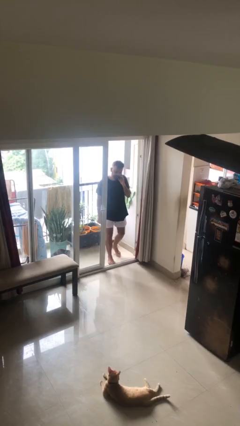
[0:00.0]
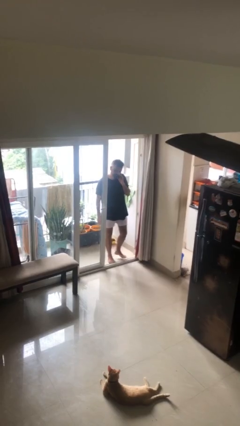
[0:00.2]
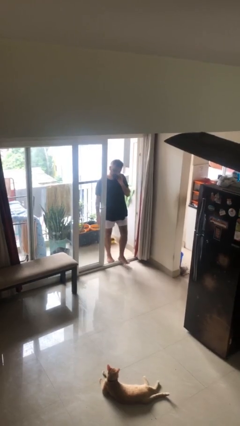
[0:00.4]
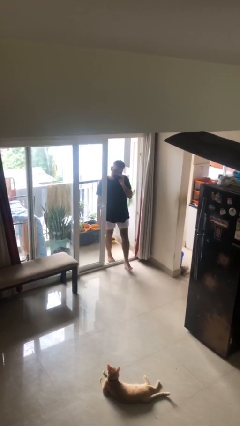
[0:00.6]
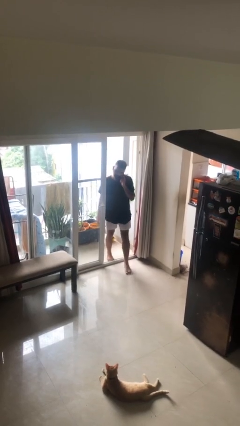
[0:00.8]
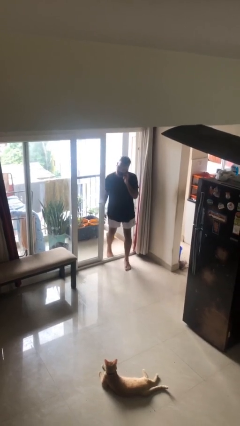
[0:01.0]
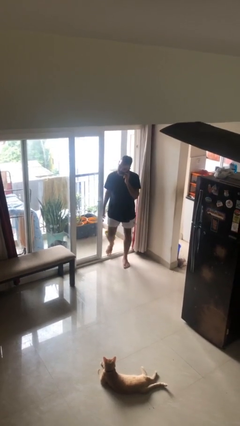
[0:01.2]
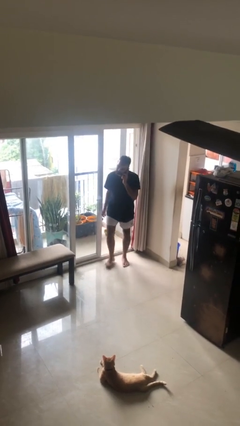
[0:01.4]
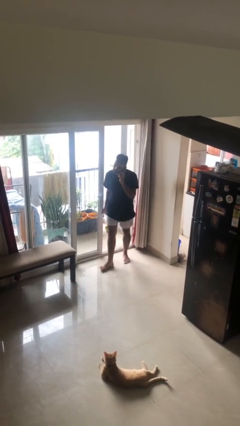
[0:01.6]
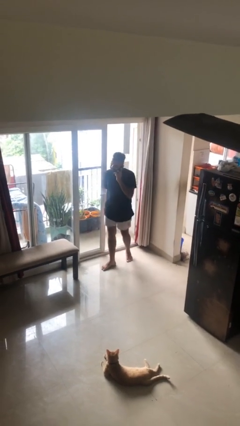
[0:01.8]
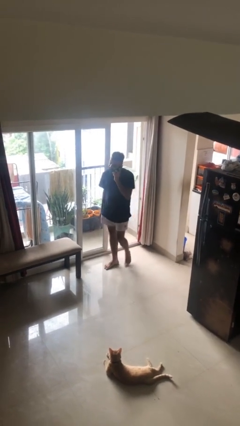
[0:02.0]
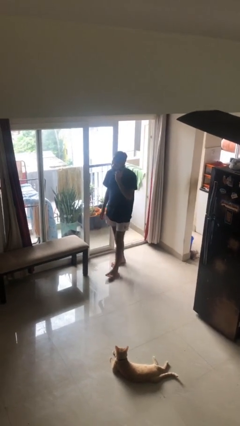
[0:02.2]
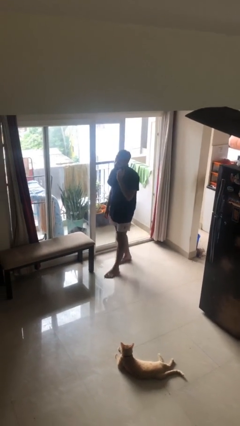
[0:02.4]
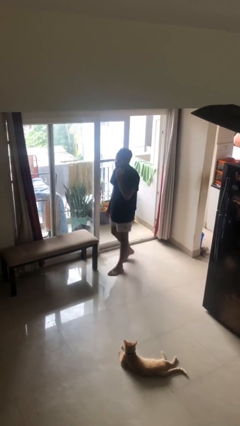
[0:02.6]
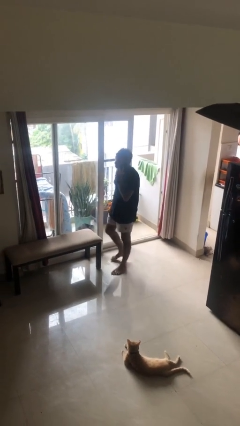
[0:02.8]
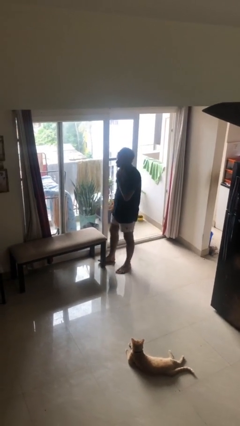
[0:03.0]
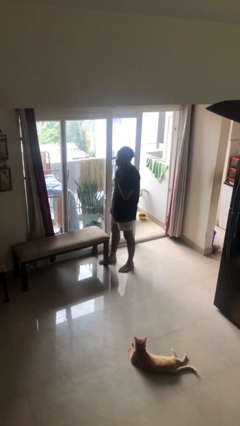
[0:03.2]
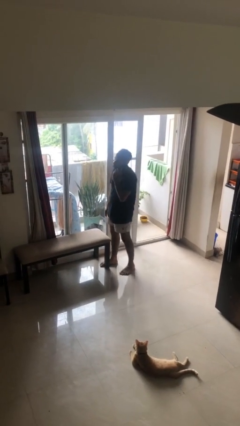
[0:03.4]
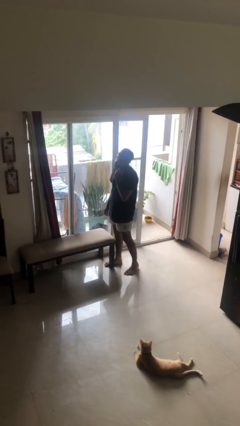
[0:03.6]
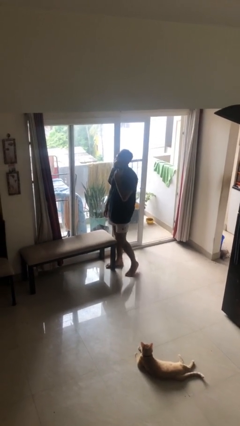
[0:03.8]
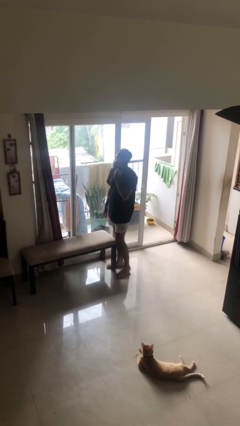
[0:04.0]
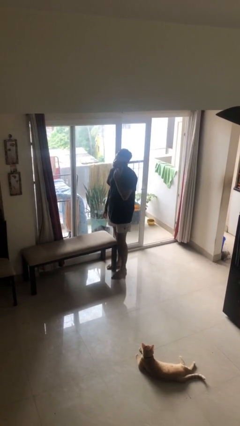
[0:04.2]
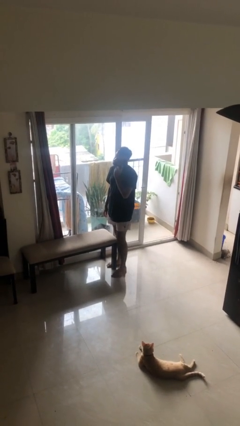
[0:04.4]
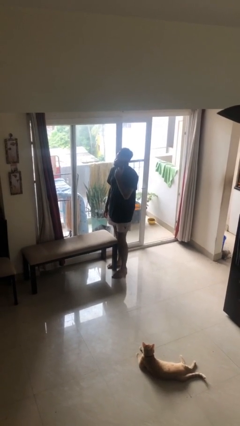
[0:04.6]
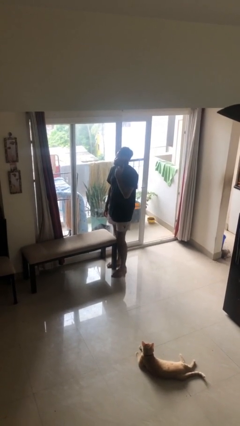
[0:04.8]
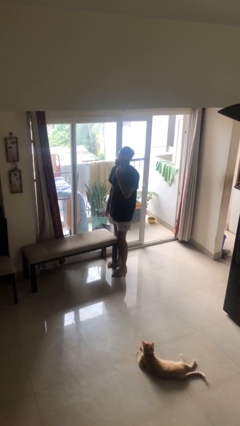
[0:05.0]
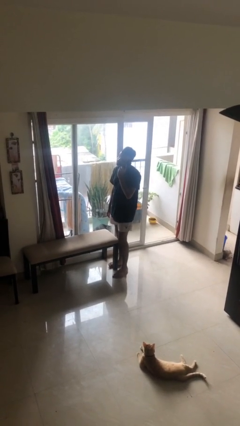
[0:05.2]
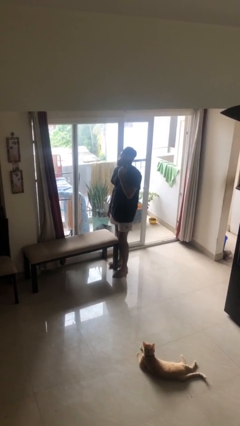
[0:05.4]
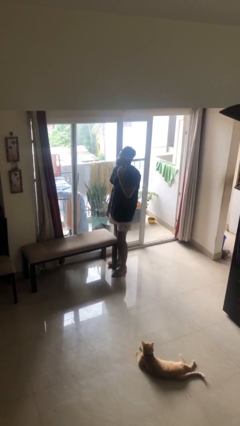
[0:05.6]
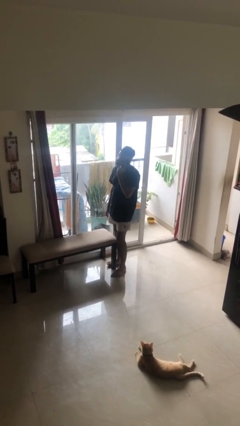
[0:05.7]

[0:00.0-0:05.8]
person enters scene through structure

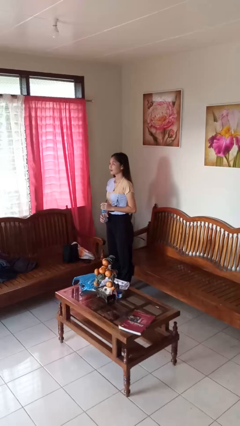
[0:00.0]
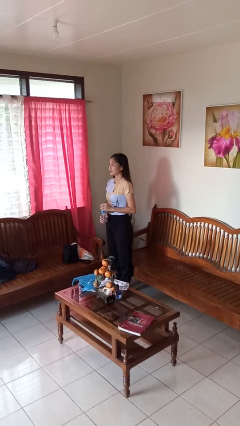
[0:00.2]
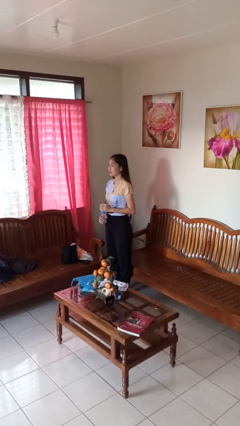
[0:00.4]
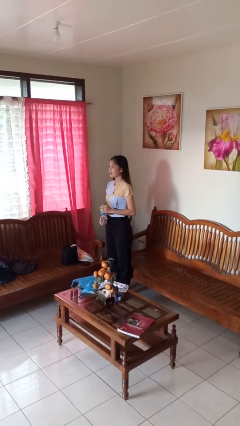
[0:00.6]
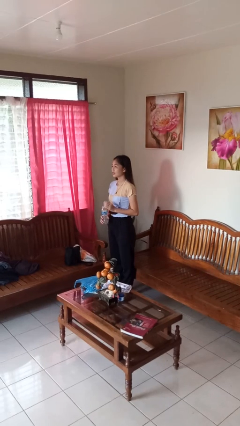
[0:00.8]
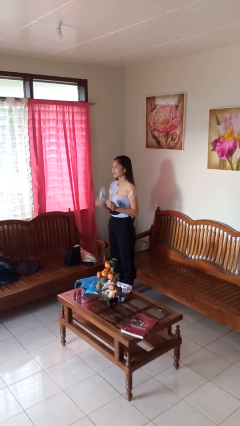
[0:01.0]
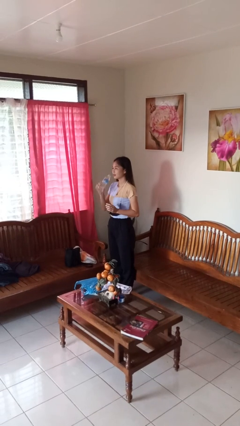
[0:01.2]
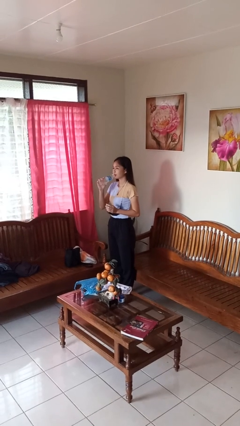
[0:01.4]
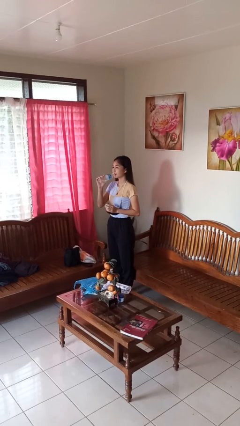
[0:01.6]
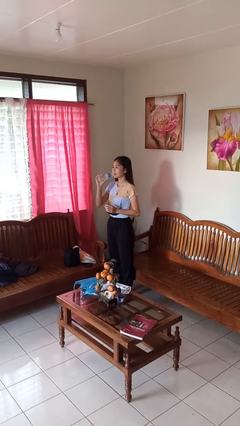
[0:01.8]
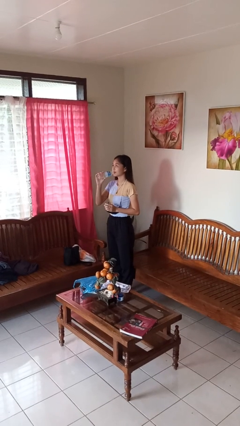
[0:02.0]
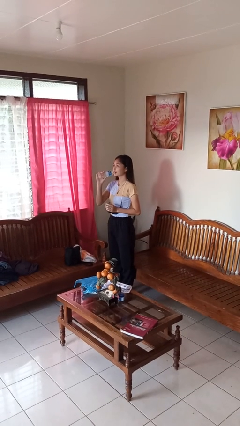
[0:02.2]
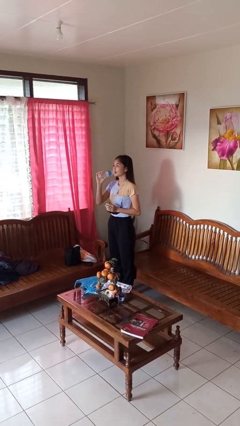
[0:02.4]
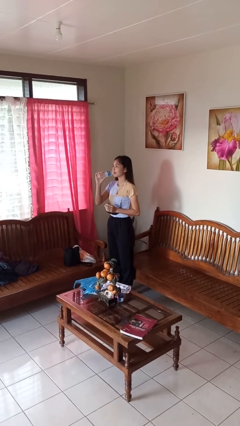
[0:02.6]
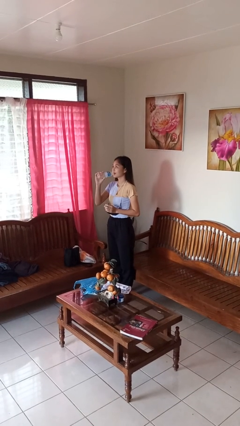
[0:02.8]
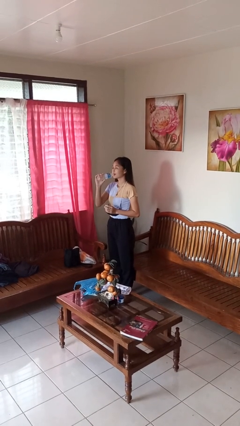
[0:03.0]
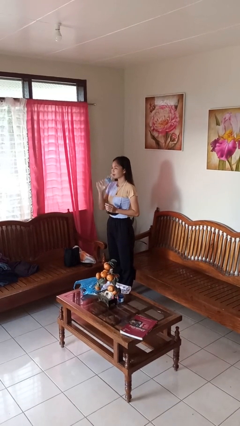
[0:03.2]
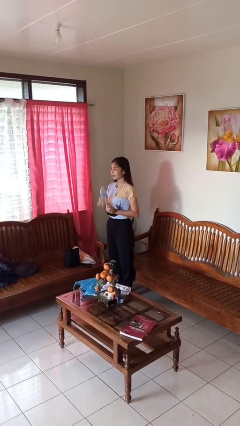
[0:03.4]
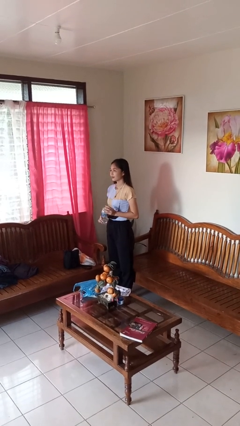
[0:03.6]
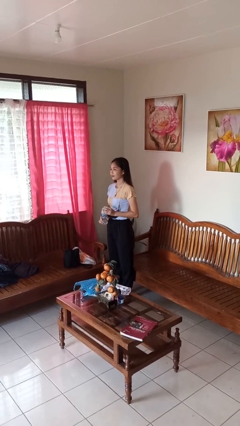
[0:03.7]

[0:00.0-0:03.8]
person drinks from bottle

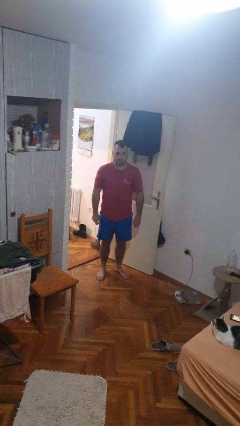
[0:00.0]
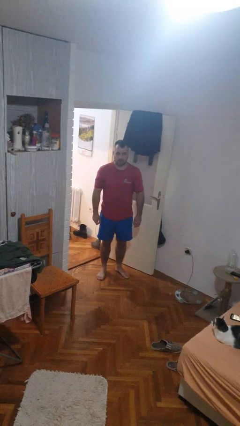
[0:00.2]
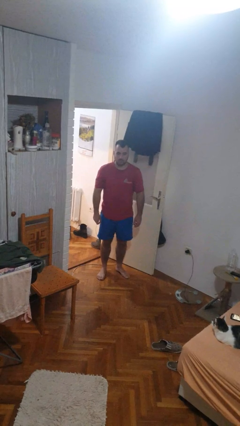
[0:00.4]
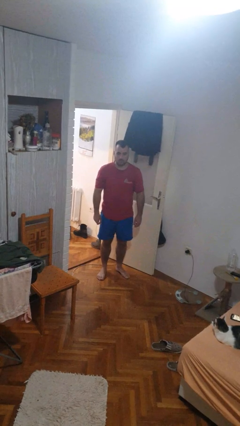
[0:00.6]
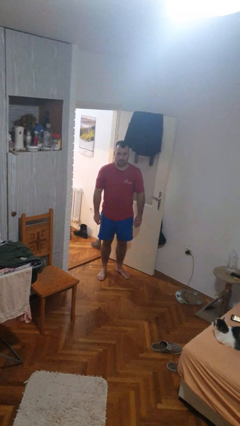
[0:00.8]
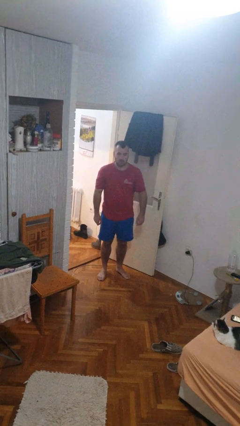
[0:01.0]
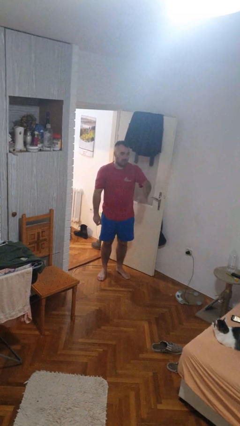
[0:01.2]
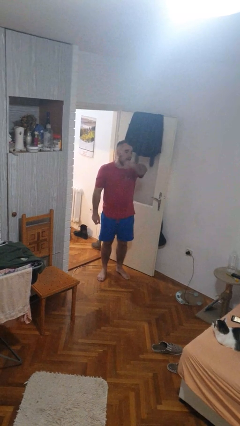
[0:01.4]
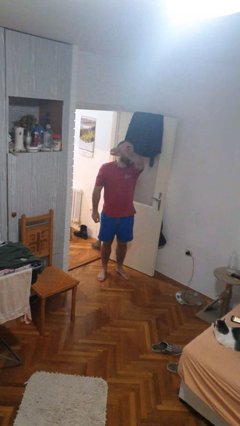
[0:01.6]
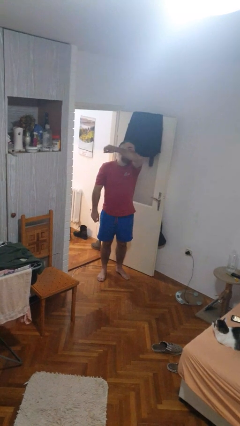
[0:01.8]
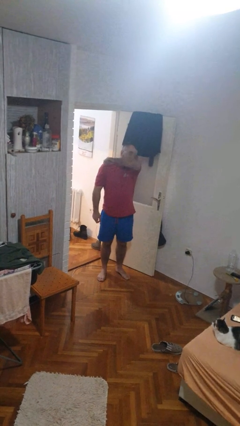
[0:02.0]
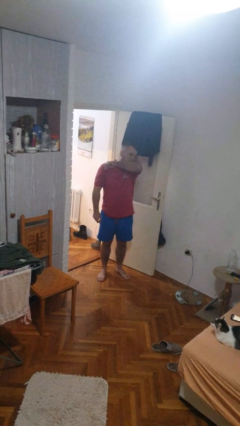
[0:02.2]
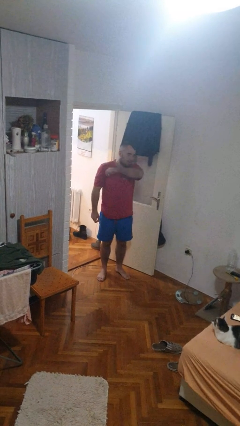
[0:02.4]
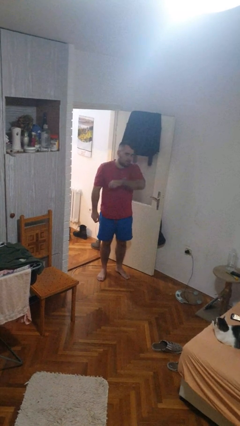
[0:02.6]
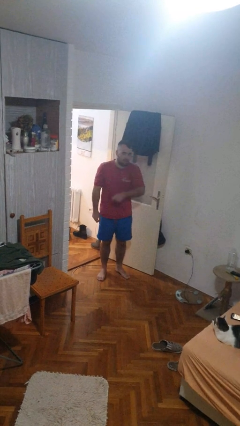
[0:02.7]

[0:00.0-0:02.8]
person sneezes into arm

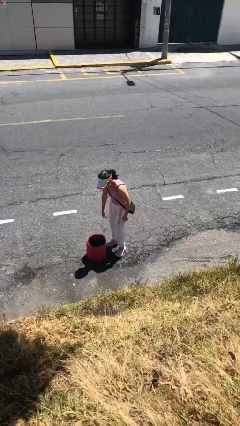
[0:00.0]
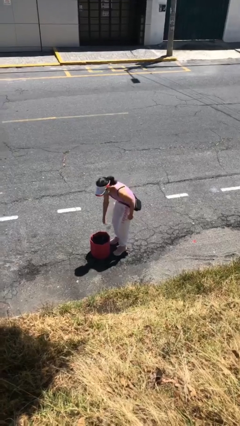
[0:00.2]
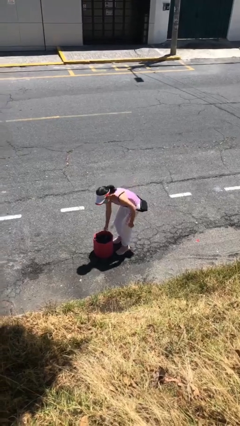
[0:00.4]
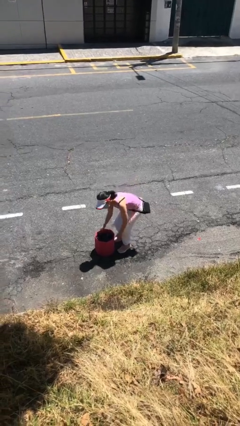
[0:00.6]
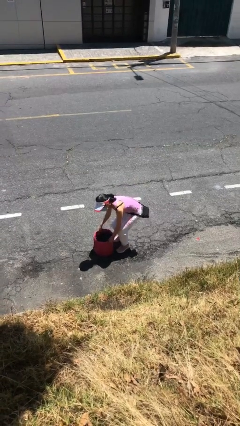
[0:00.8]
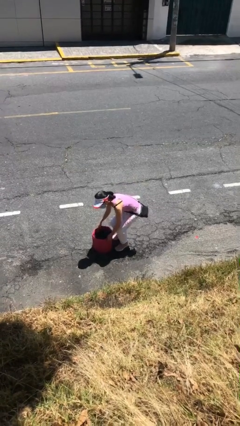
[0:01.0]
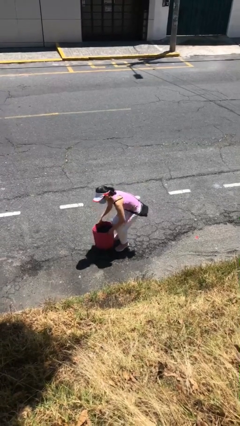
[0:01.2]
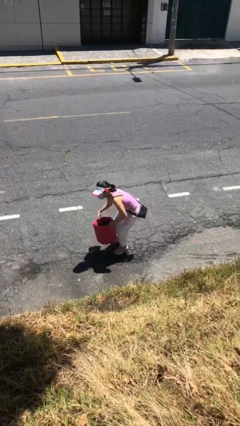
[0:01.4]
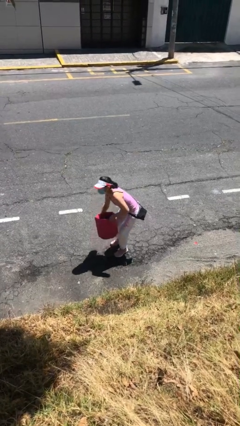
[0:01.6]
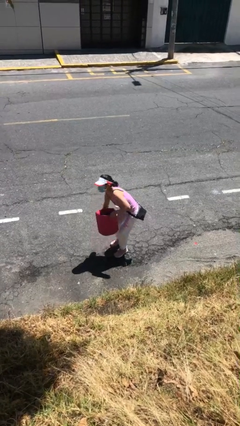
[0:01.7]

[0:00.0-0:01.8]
person picks up object from floor

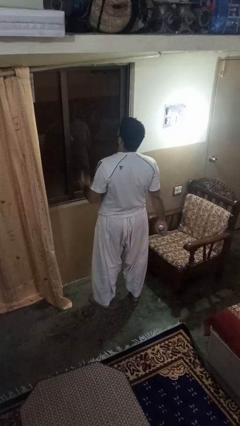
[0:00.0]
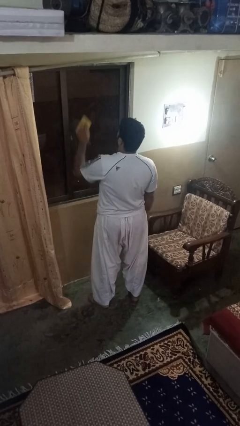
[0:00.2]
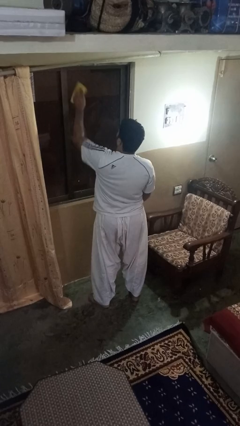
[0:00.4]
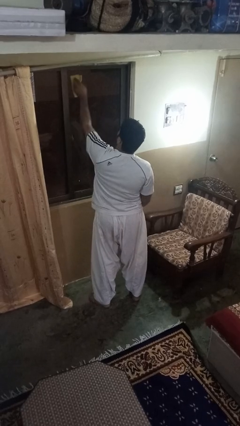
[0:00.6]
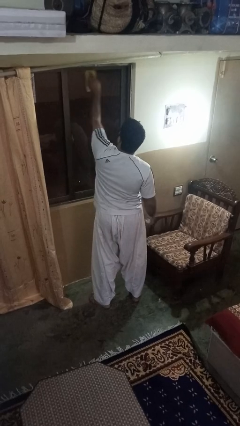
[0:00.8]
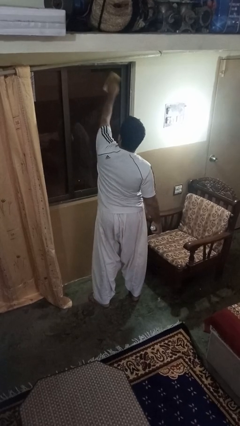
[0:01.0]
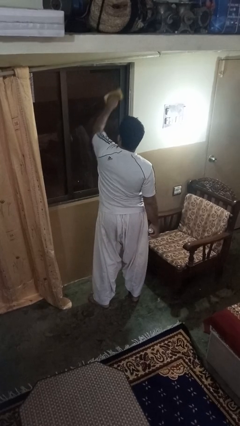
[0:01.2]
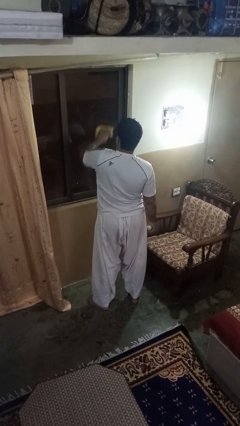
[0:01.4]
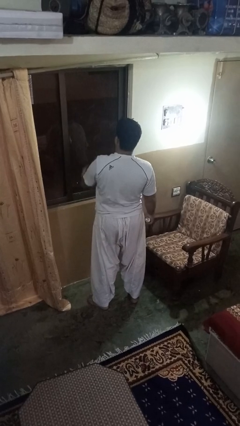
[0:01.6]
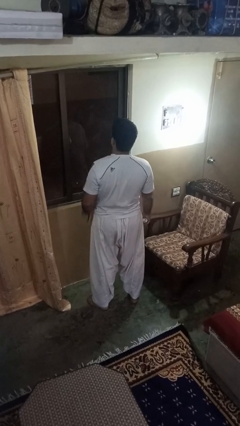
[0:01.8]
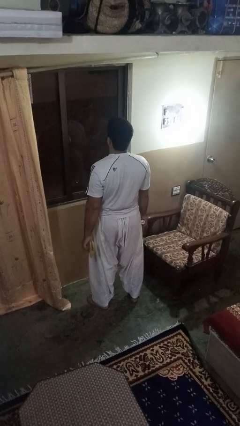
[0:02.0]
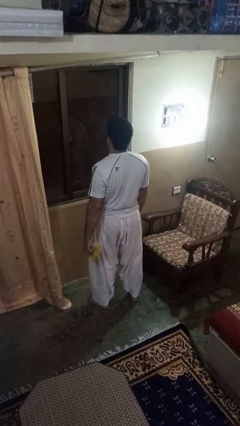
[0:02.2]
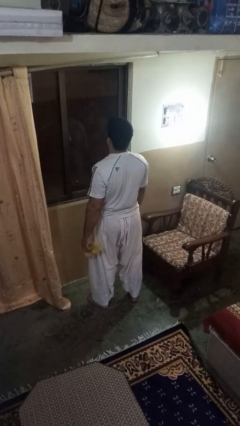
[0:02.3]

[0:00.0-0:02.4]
person washes window

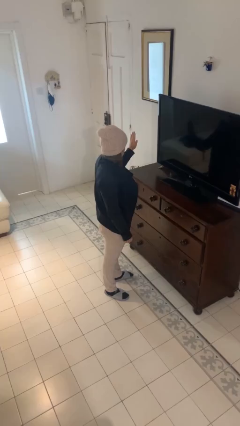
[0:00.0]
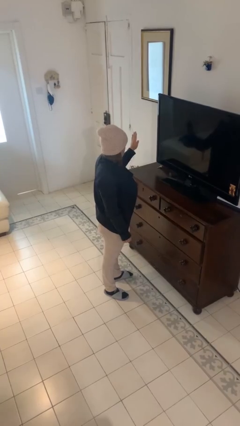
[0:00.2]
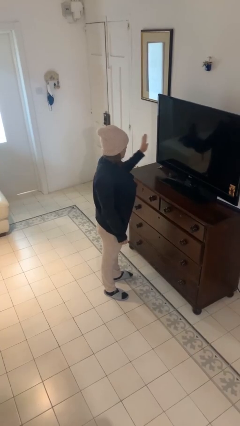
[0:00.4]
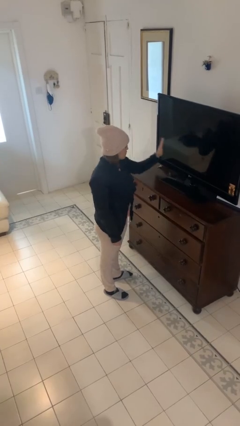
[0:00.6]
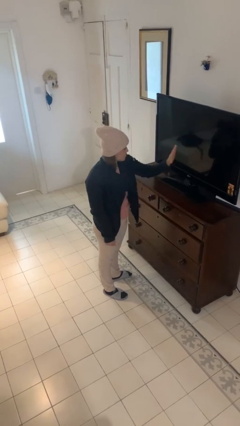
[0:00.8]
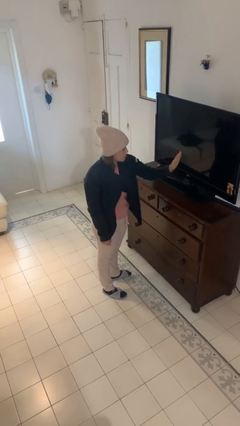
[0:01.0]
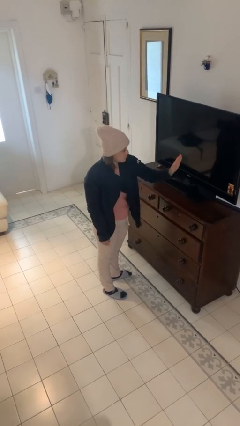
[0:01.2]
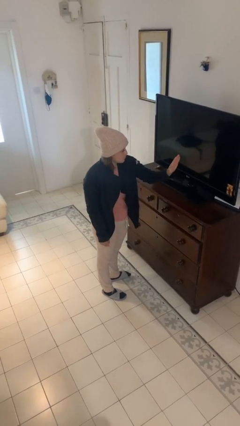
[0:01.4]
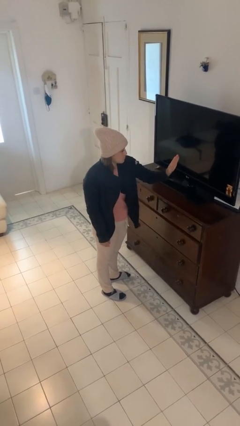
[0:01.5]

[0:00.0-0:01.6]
person gestures swipe left
